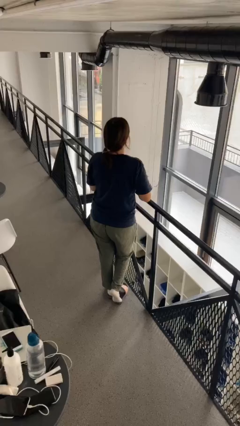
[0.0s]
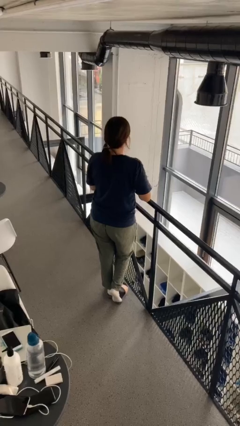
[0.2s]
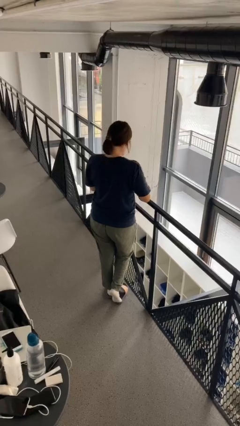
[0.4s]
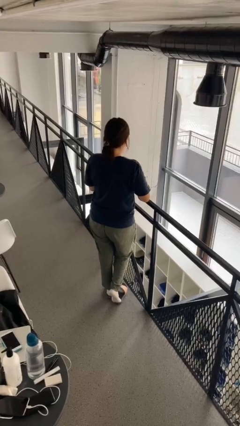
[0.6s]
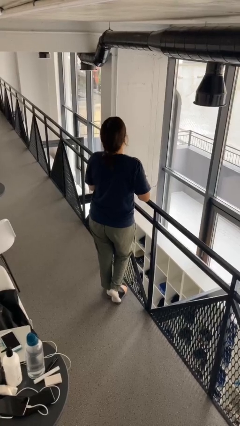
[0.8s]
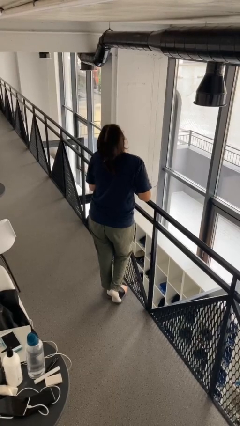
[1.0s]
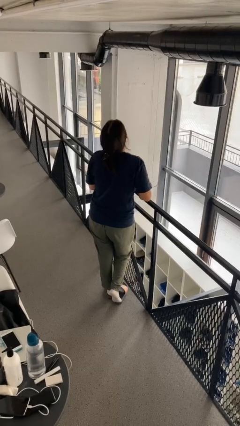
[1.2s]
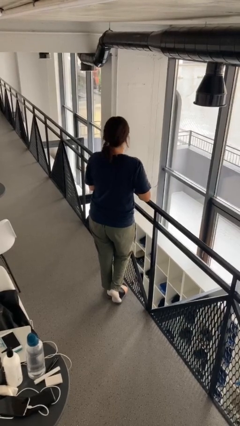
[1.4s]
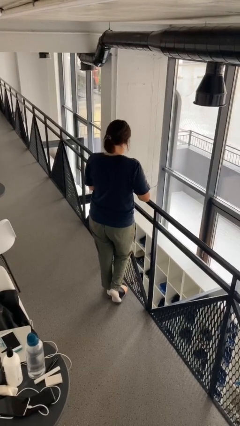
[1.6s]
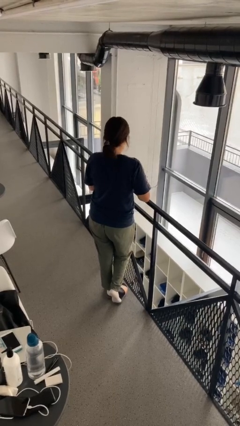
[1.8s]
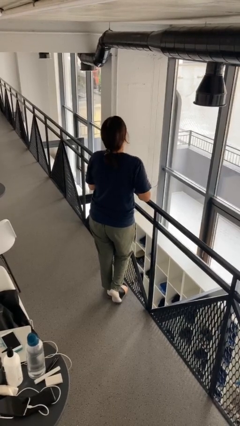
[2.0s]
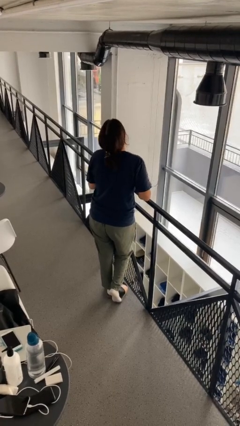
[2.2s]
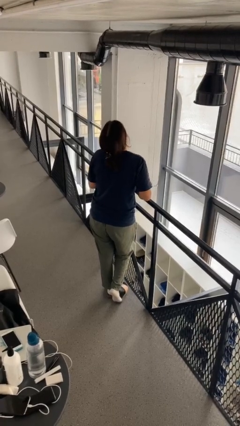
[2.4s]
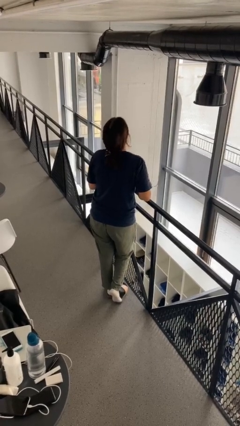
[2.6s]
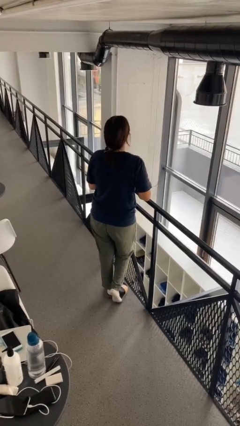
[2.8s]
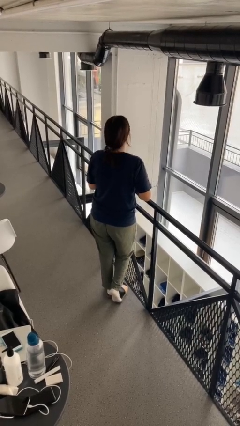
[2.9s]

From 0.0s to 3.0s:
person nods head

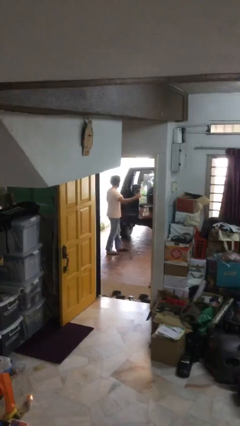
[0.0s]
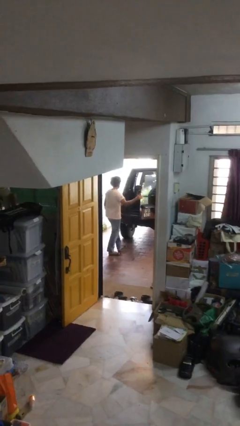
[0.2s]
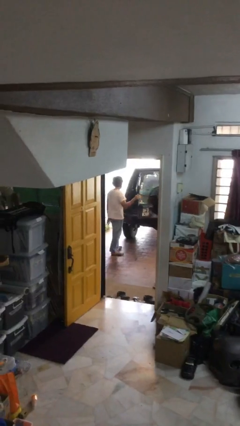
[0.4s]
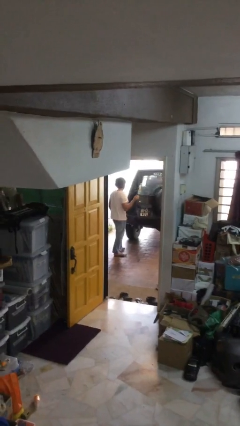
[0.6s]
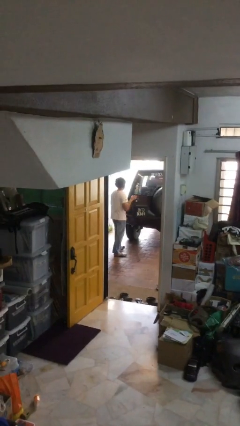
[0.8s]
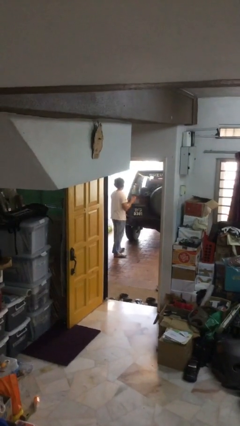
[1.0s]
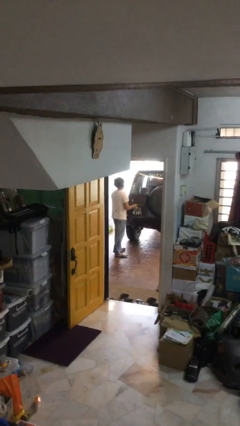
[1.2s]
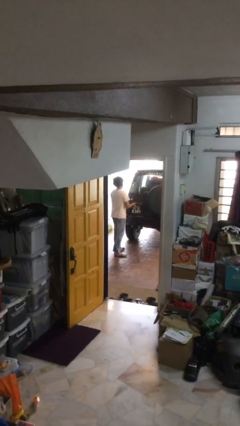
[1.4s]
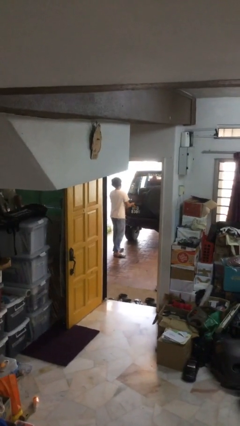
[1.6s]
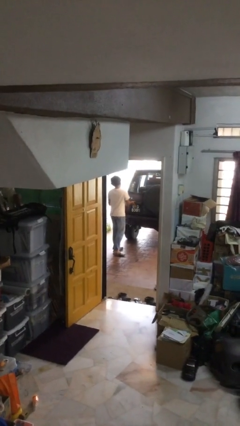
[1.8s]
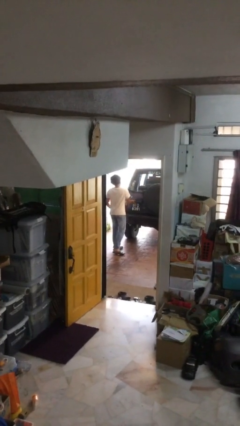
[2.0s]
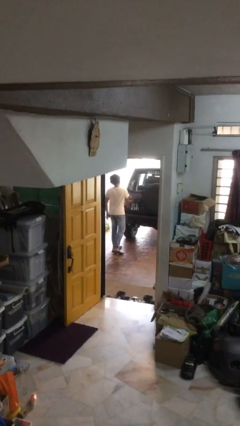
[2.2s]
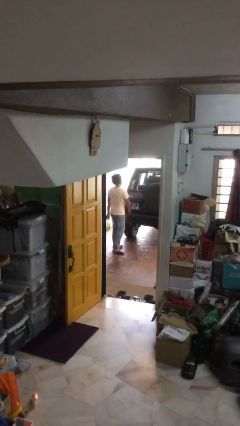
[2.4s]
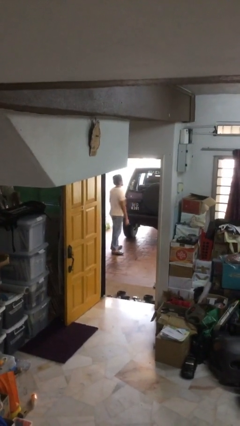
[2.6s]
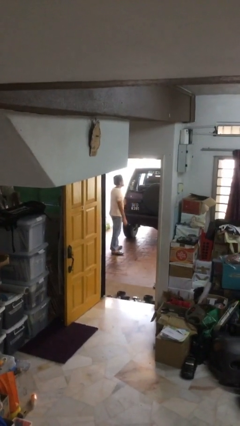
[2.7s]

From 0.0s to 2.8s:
person closes car trunk

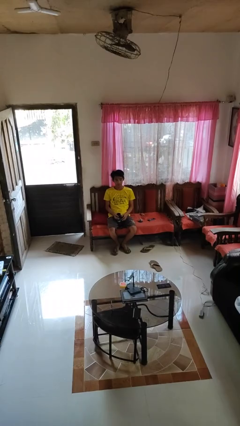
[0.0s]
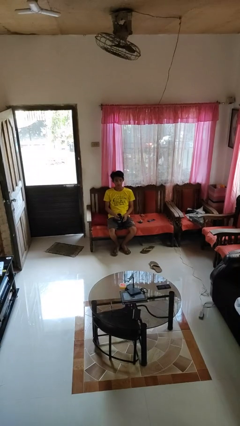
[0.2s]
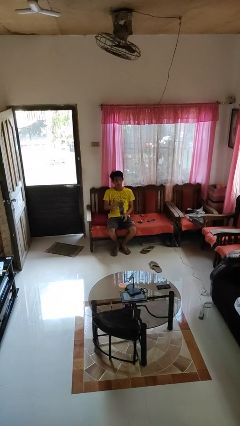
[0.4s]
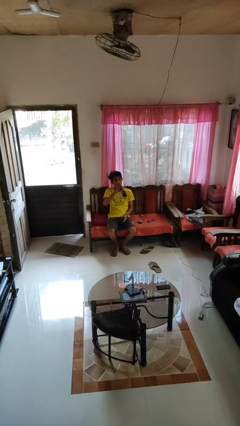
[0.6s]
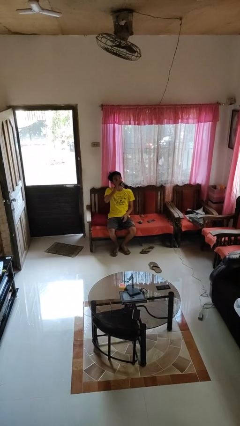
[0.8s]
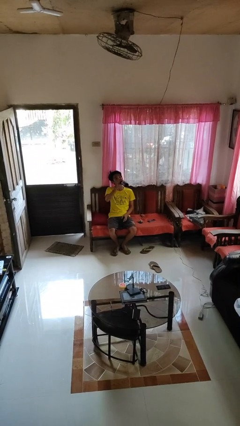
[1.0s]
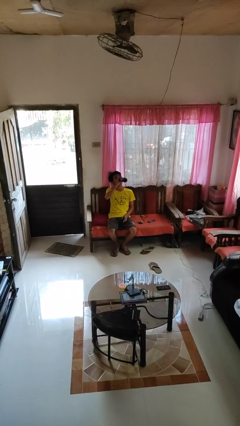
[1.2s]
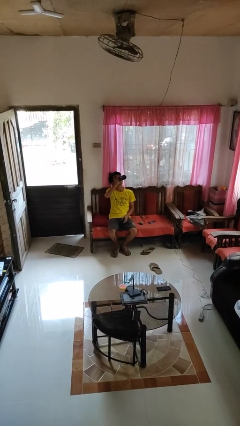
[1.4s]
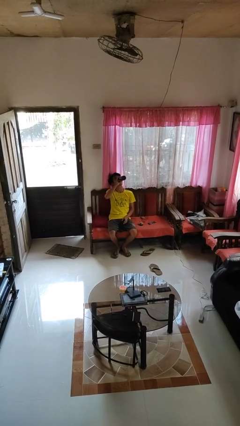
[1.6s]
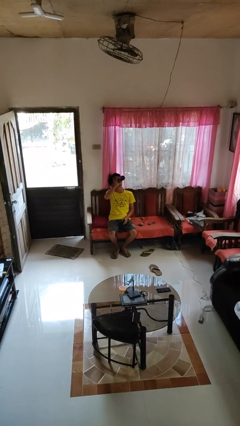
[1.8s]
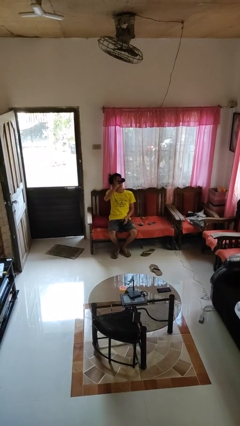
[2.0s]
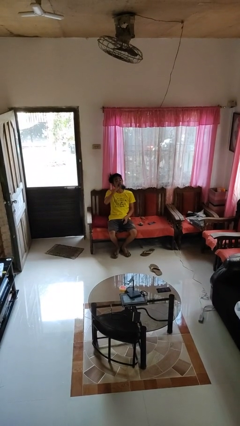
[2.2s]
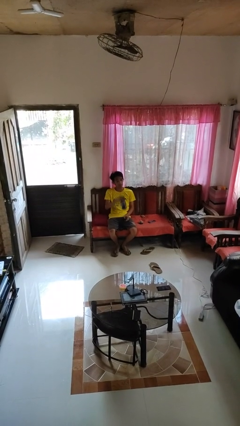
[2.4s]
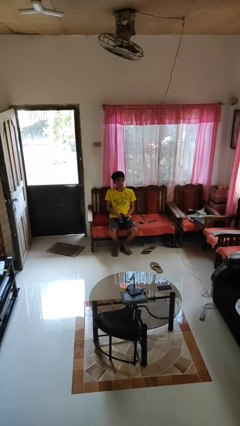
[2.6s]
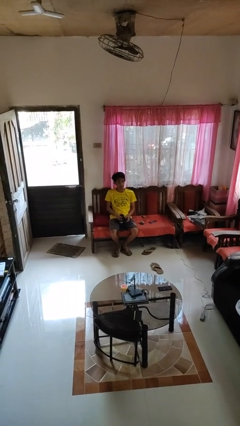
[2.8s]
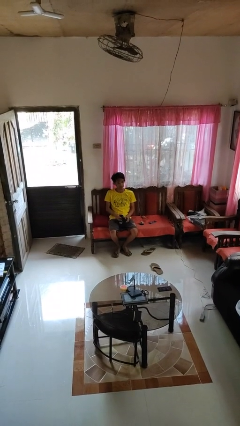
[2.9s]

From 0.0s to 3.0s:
person drinks from bottle

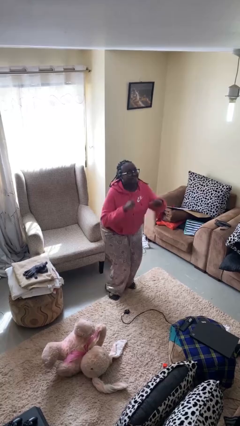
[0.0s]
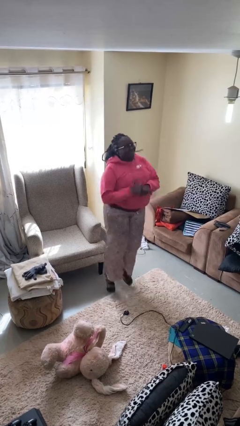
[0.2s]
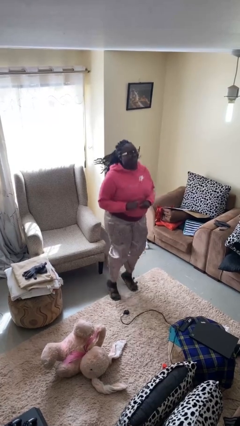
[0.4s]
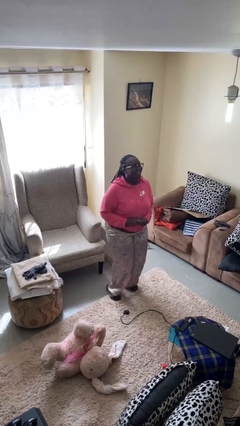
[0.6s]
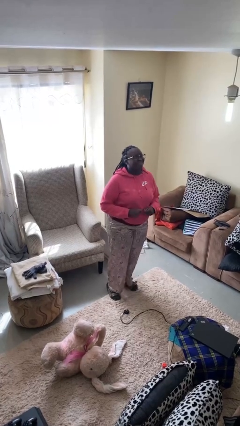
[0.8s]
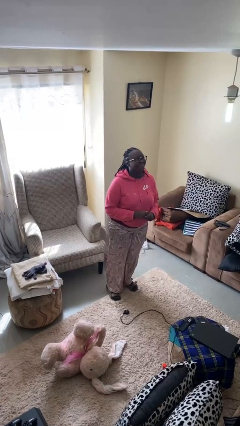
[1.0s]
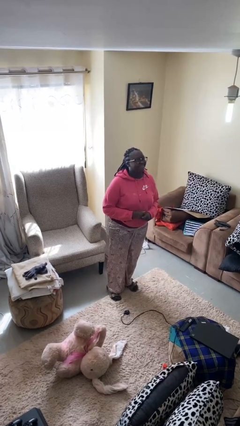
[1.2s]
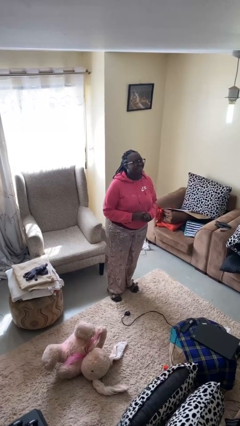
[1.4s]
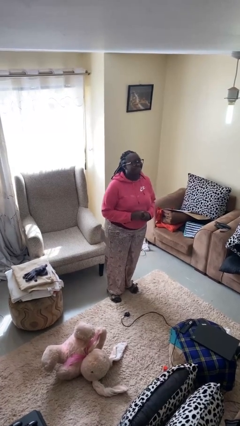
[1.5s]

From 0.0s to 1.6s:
person jumps

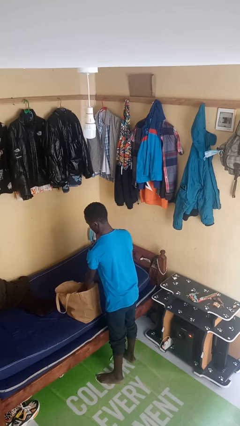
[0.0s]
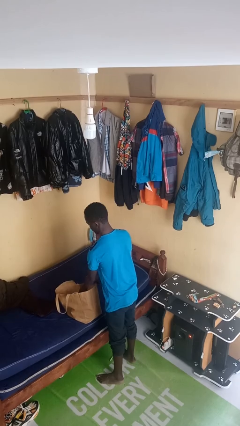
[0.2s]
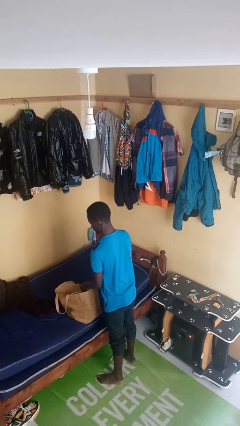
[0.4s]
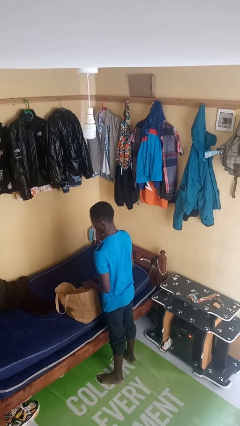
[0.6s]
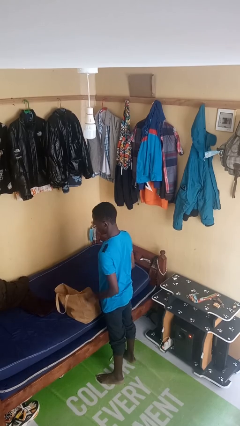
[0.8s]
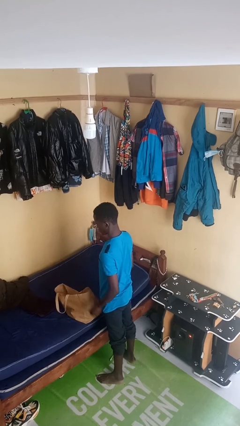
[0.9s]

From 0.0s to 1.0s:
person puts object into bag

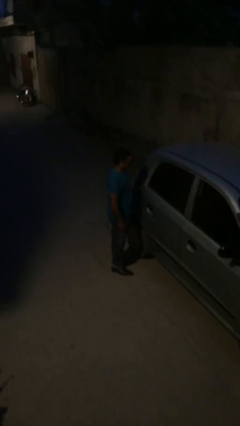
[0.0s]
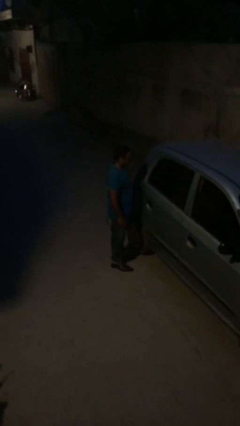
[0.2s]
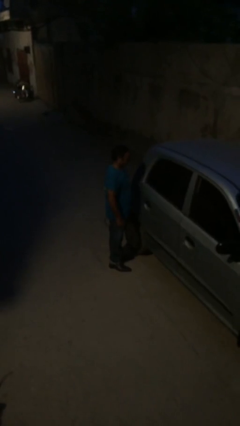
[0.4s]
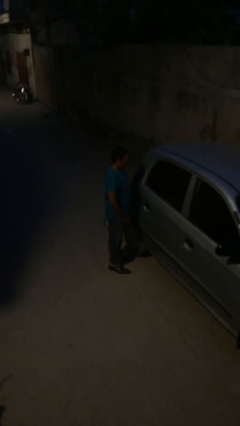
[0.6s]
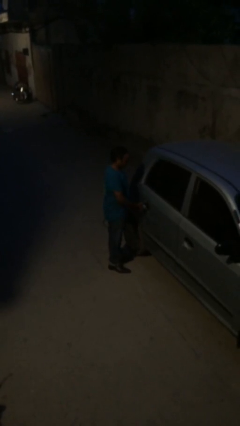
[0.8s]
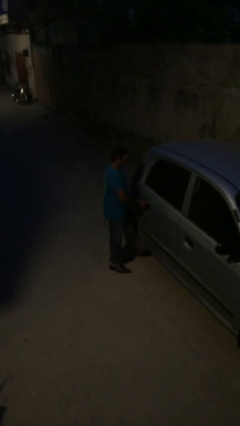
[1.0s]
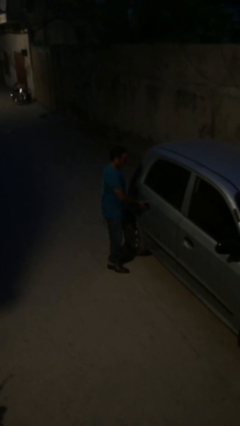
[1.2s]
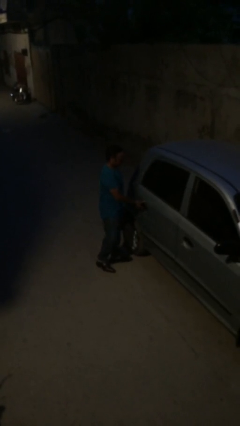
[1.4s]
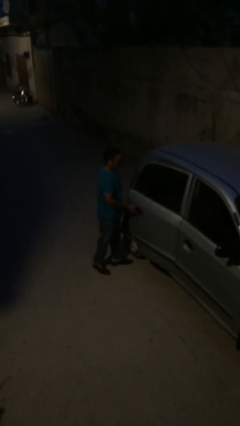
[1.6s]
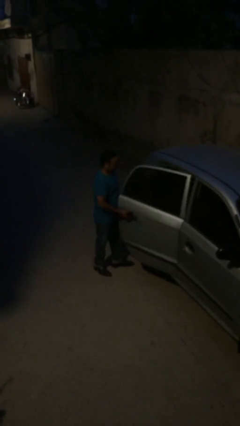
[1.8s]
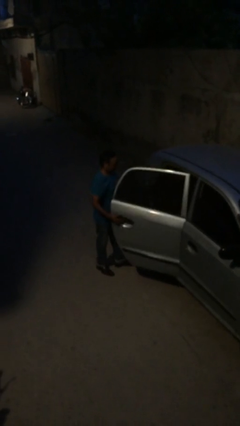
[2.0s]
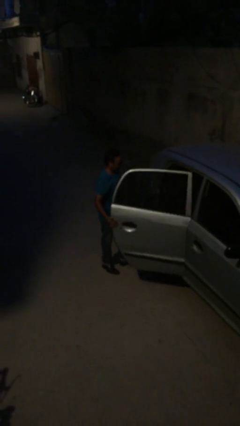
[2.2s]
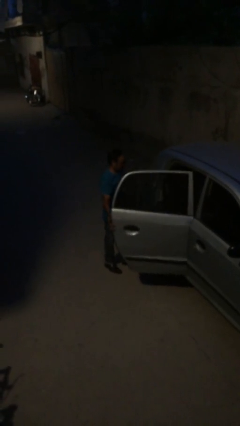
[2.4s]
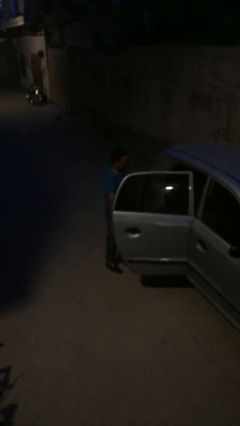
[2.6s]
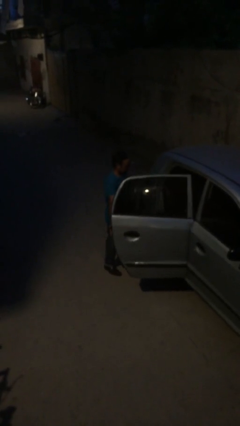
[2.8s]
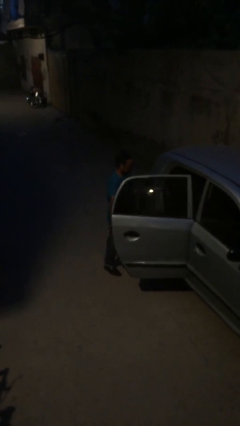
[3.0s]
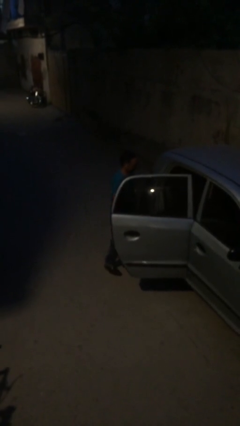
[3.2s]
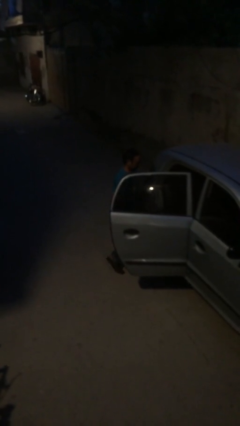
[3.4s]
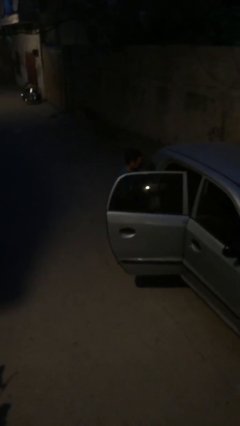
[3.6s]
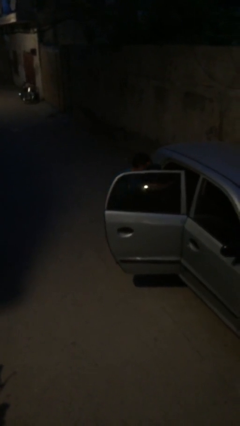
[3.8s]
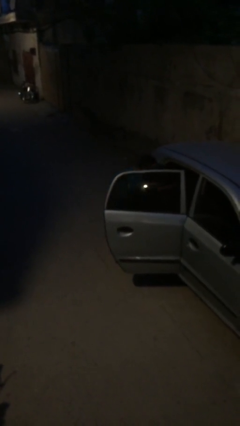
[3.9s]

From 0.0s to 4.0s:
person opens car door

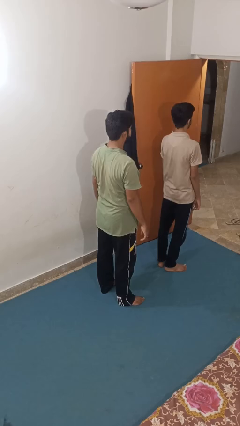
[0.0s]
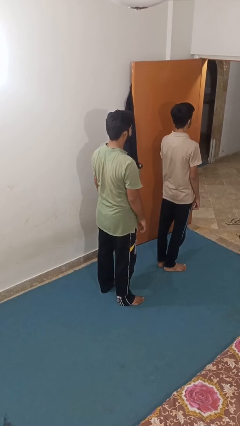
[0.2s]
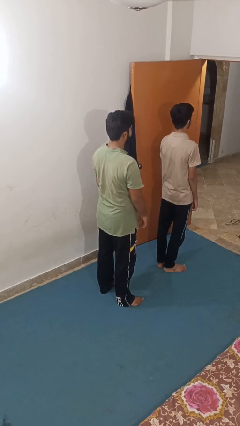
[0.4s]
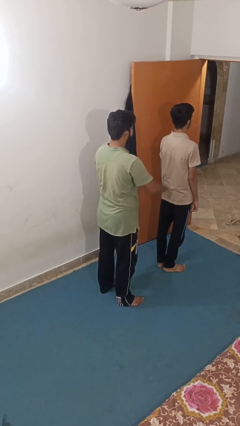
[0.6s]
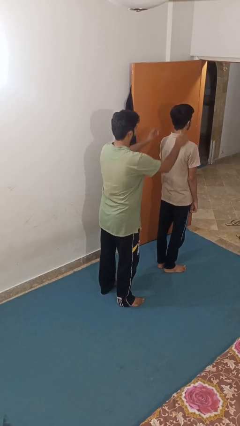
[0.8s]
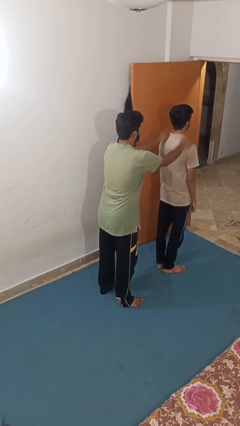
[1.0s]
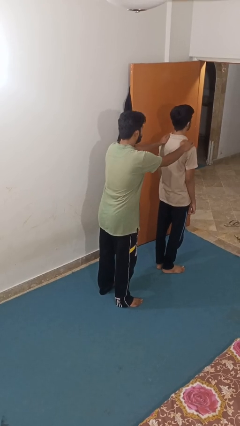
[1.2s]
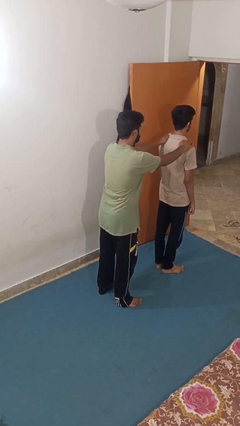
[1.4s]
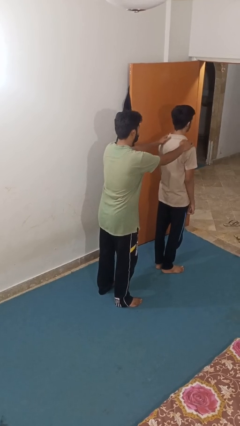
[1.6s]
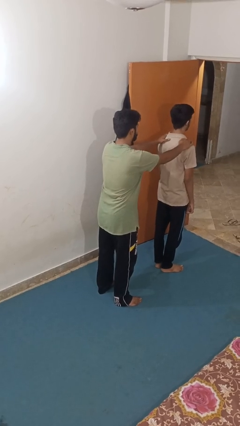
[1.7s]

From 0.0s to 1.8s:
person grabs person by shoulder
